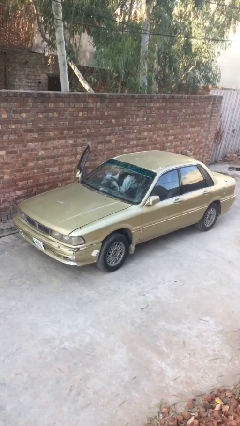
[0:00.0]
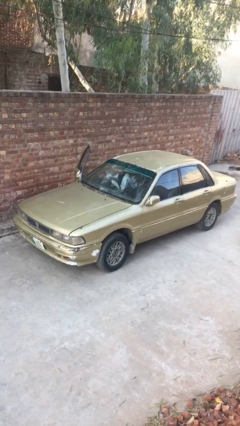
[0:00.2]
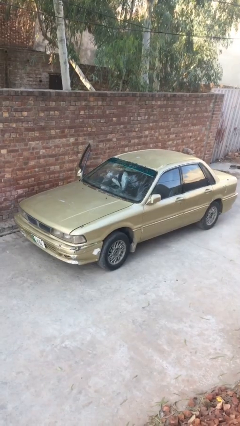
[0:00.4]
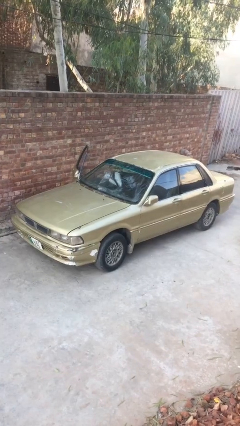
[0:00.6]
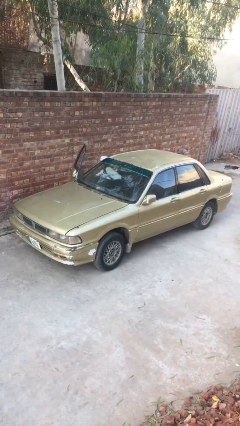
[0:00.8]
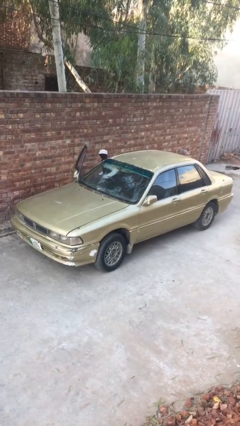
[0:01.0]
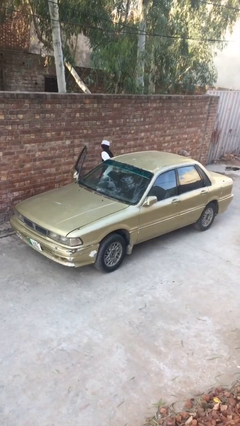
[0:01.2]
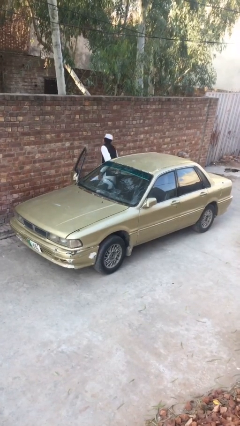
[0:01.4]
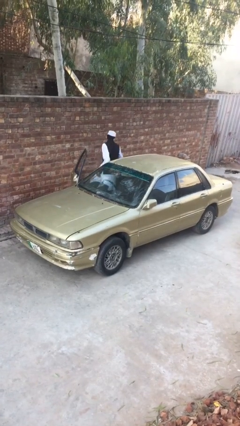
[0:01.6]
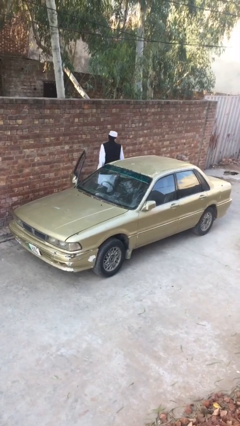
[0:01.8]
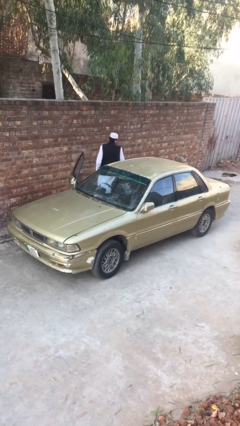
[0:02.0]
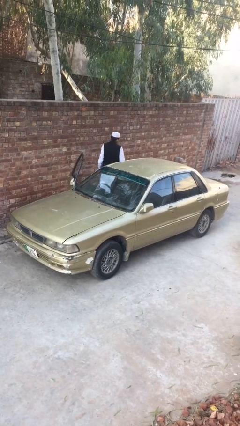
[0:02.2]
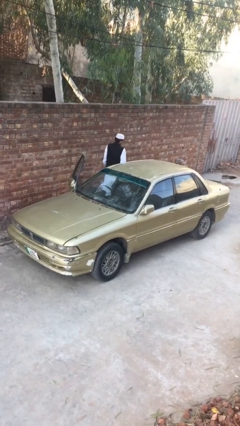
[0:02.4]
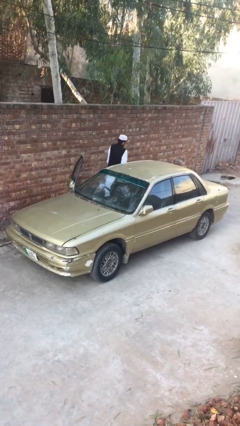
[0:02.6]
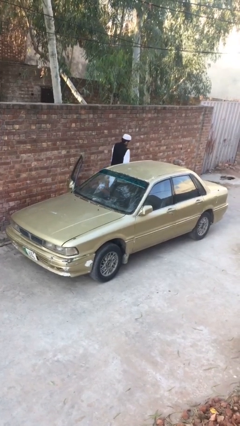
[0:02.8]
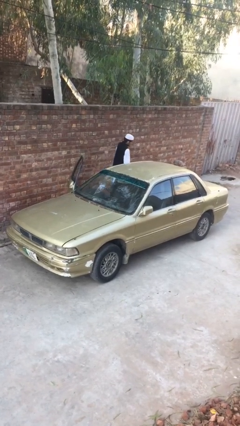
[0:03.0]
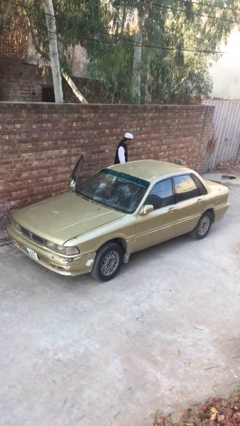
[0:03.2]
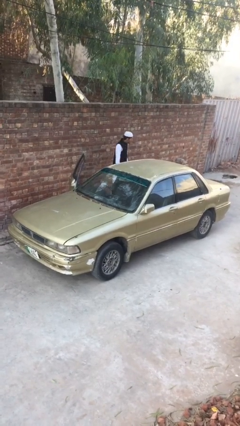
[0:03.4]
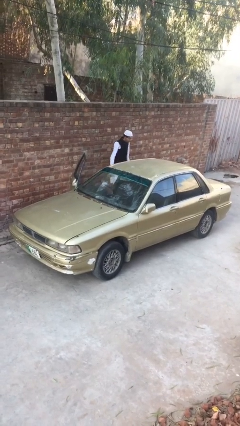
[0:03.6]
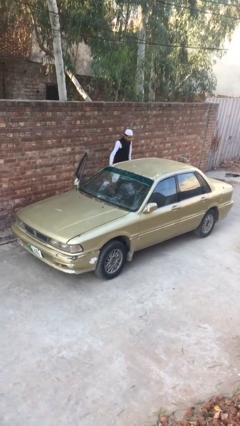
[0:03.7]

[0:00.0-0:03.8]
person exits car

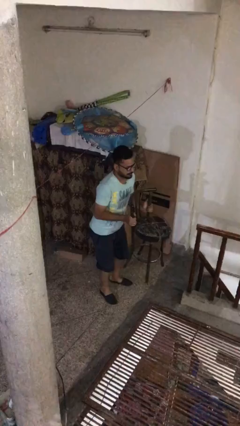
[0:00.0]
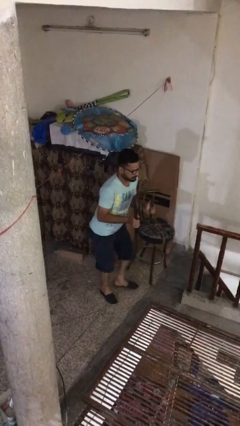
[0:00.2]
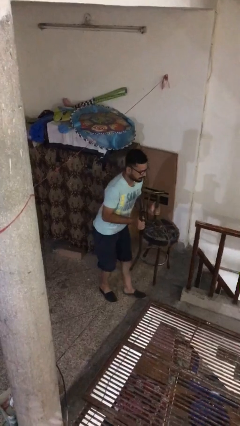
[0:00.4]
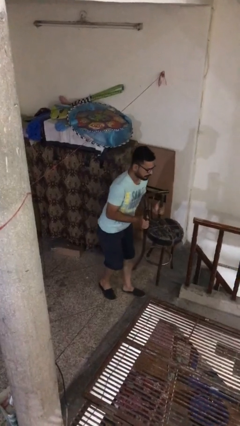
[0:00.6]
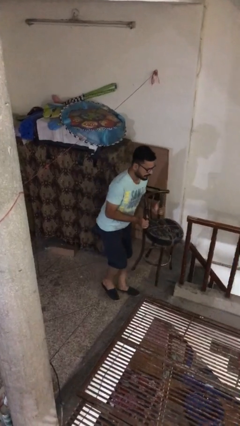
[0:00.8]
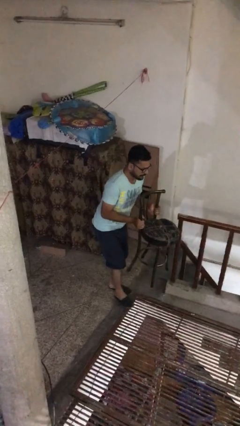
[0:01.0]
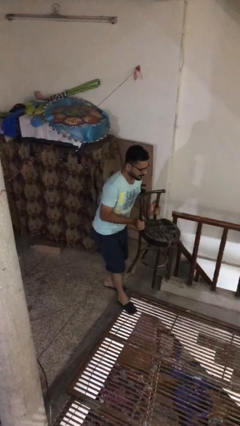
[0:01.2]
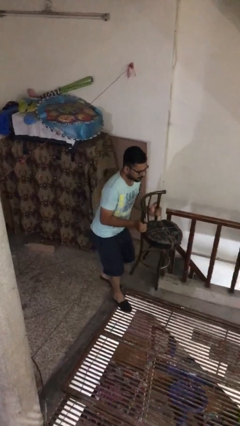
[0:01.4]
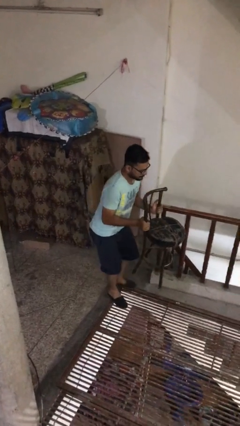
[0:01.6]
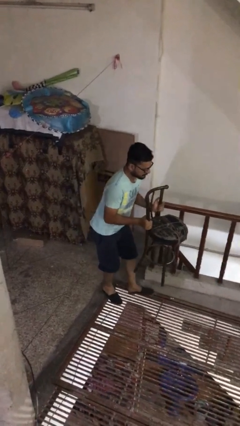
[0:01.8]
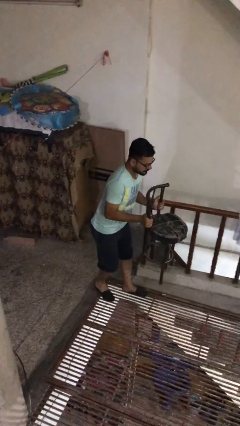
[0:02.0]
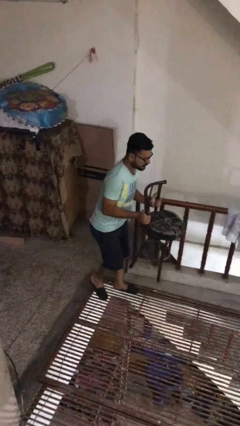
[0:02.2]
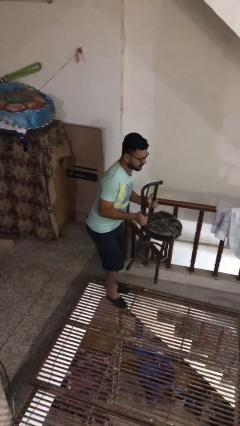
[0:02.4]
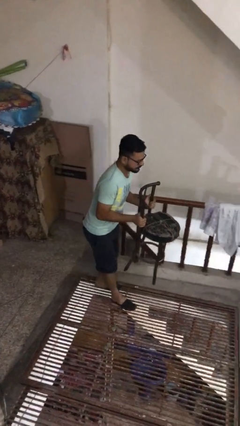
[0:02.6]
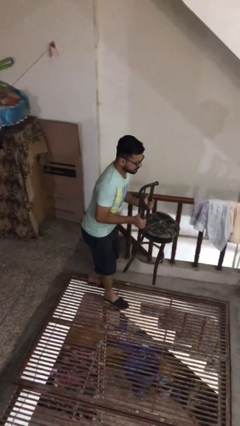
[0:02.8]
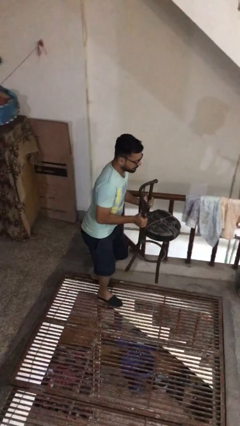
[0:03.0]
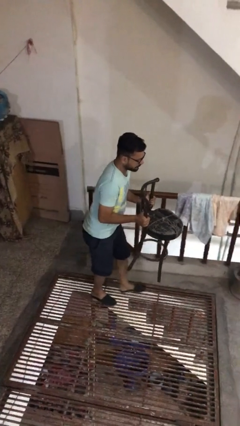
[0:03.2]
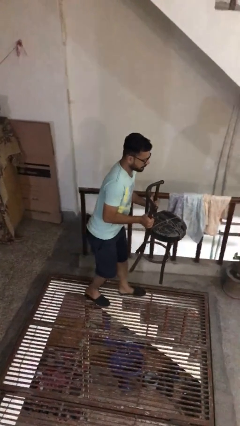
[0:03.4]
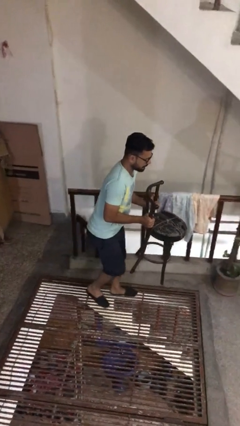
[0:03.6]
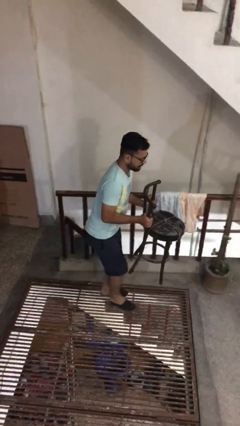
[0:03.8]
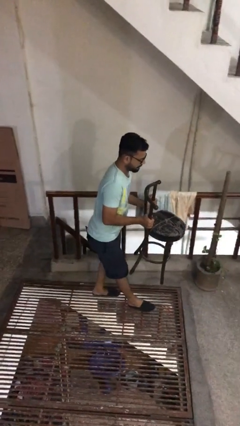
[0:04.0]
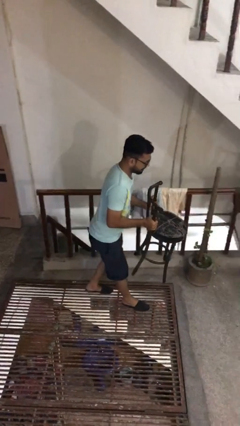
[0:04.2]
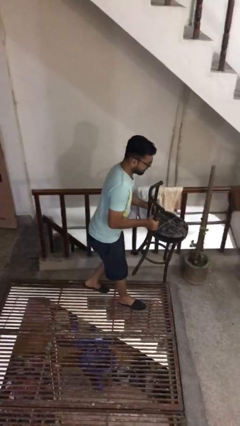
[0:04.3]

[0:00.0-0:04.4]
person carries heavy object

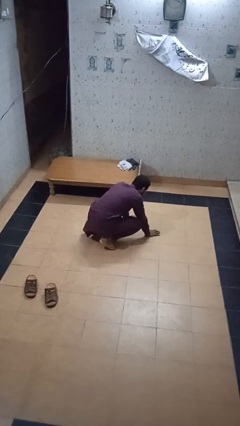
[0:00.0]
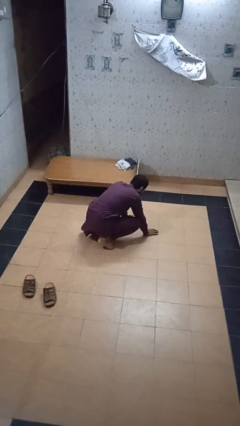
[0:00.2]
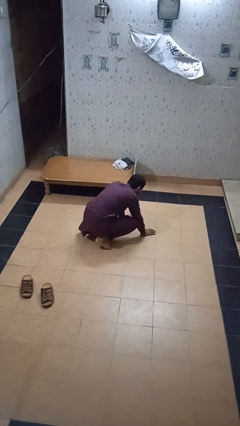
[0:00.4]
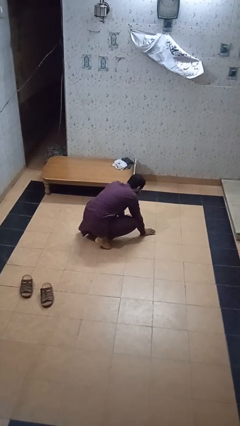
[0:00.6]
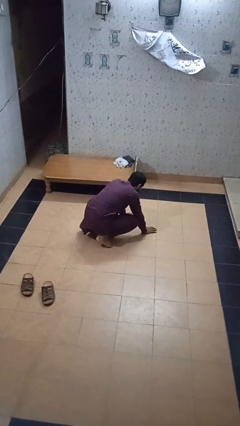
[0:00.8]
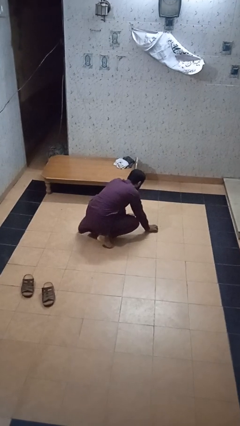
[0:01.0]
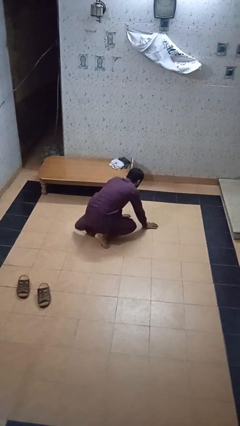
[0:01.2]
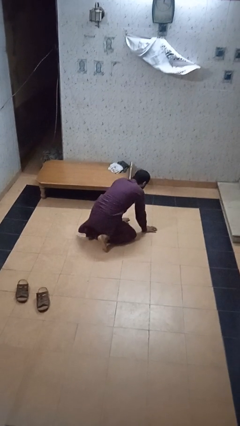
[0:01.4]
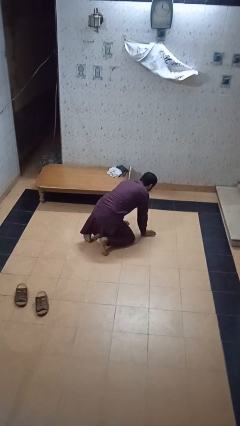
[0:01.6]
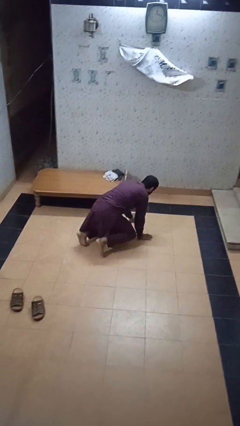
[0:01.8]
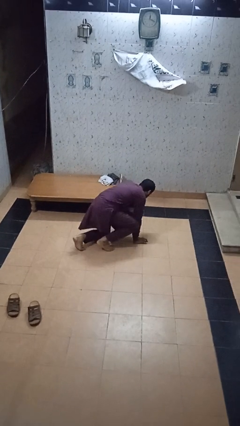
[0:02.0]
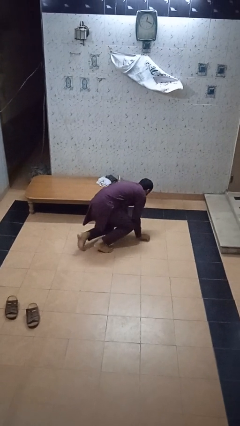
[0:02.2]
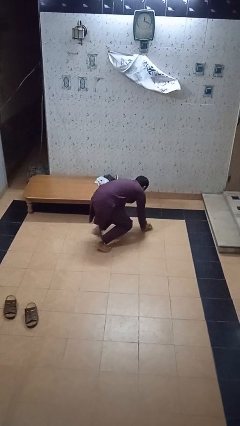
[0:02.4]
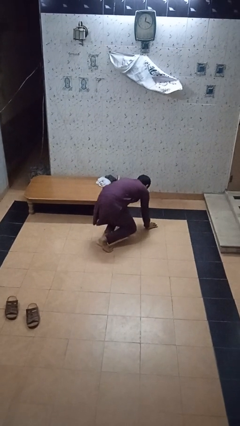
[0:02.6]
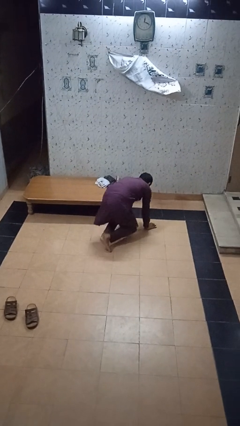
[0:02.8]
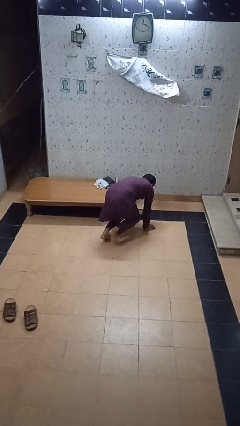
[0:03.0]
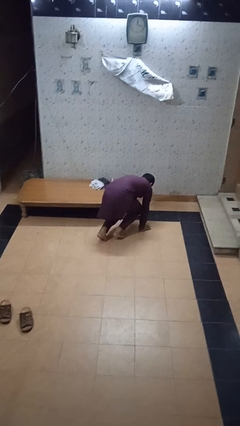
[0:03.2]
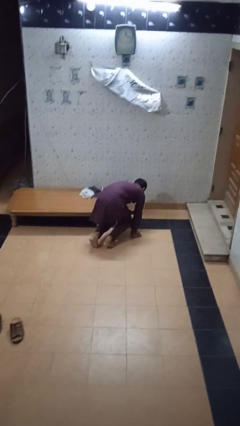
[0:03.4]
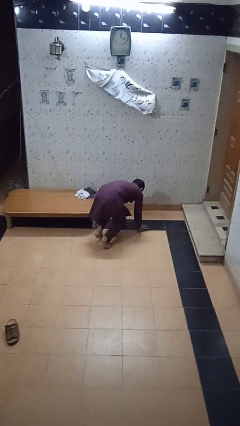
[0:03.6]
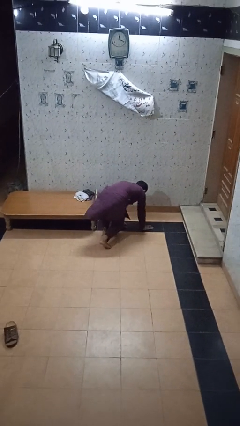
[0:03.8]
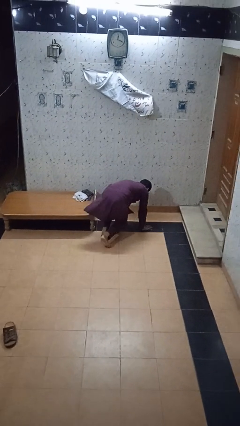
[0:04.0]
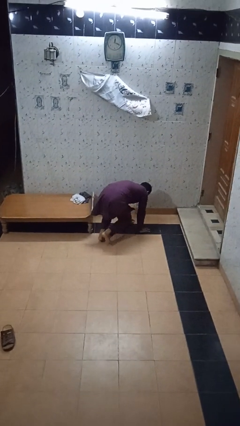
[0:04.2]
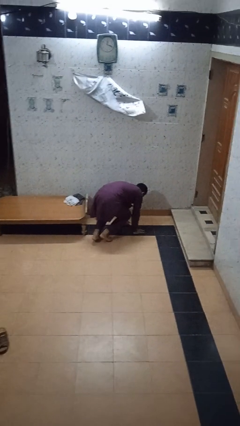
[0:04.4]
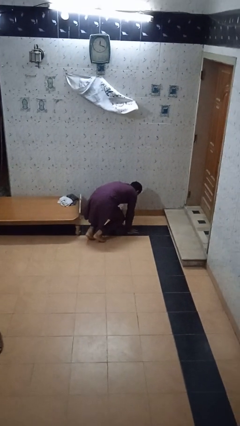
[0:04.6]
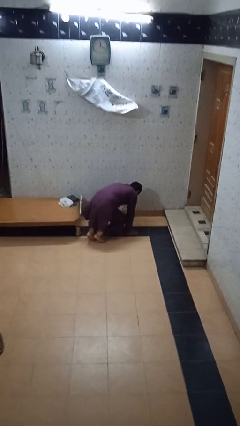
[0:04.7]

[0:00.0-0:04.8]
person crawls

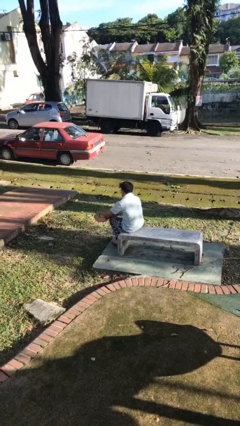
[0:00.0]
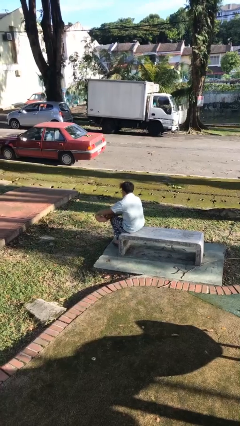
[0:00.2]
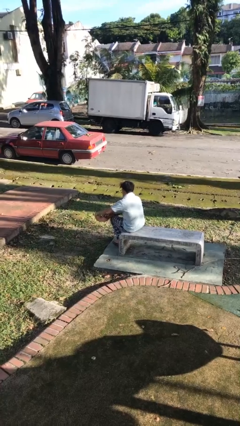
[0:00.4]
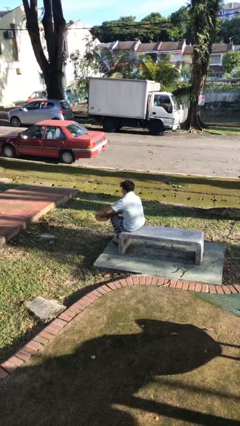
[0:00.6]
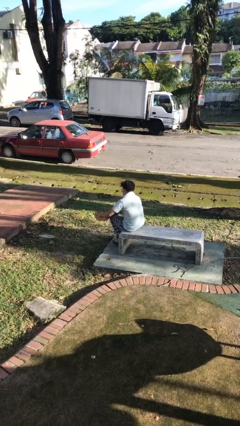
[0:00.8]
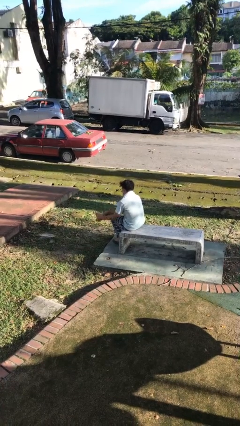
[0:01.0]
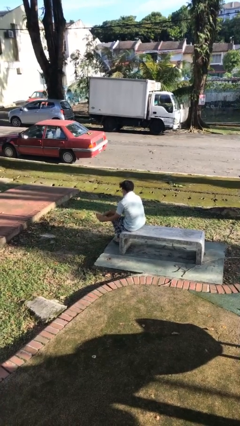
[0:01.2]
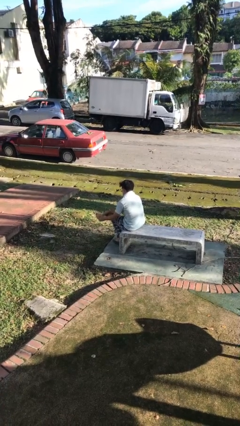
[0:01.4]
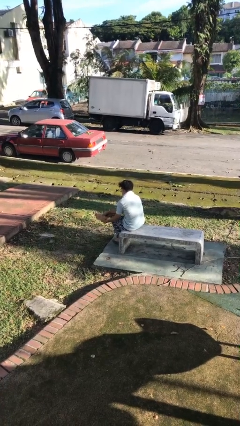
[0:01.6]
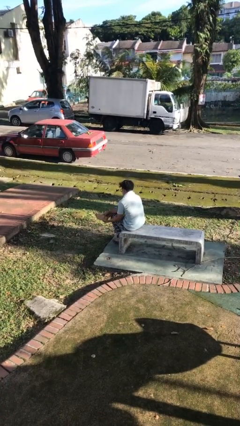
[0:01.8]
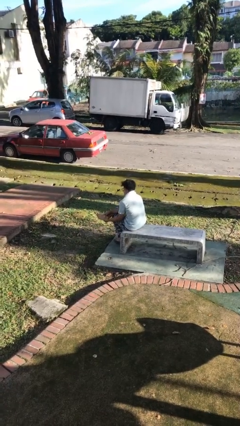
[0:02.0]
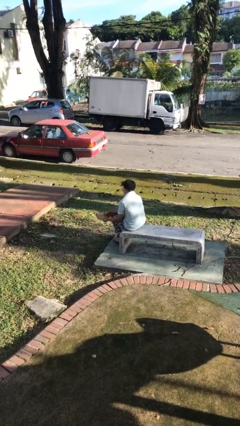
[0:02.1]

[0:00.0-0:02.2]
person rubs foot

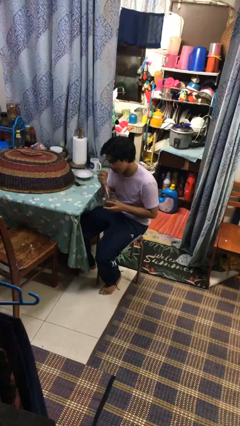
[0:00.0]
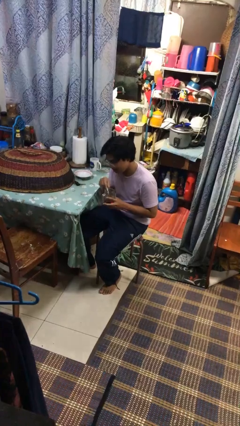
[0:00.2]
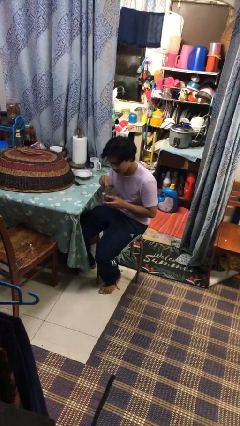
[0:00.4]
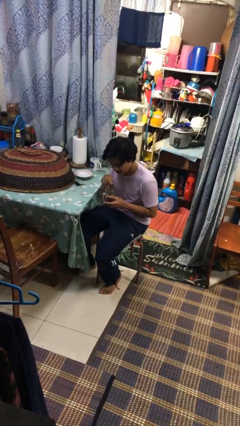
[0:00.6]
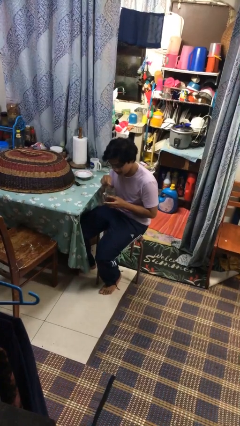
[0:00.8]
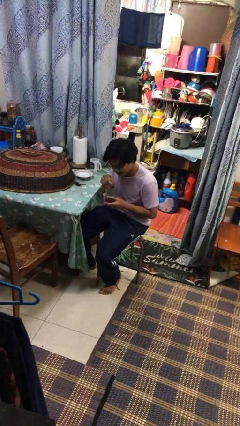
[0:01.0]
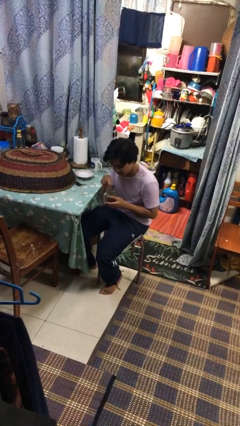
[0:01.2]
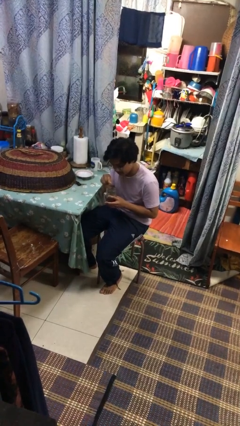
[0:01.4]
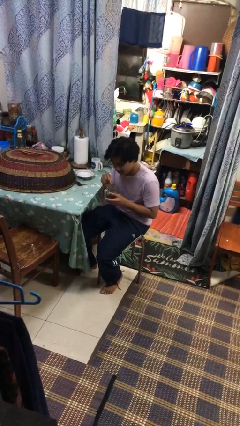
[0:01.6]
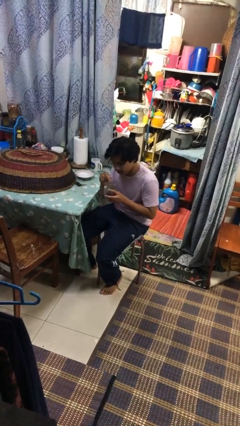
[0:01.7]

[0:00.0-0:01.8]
person stirs mug

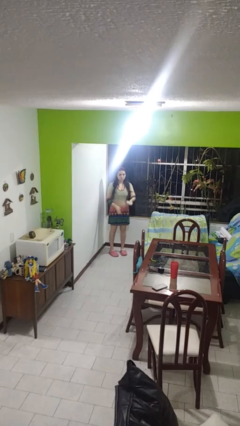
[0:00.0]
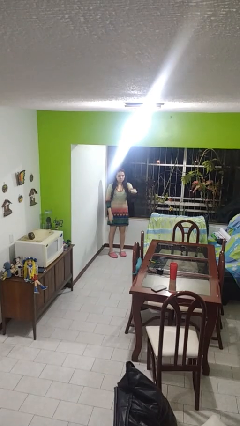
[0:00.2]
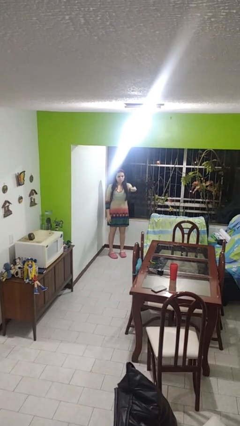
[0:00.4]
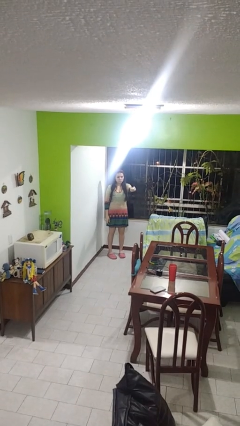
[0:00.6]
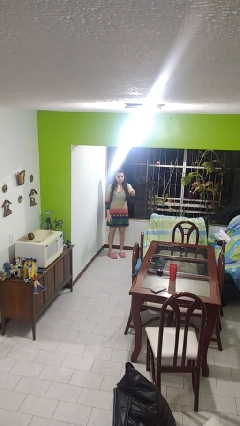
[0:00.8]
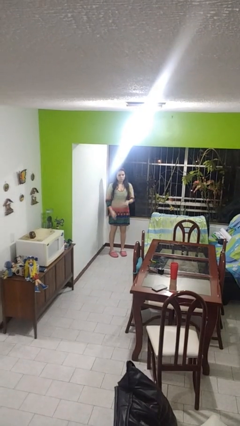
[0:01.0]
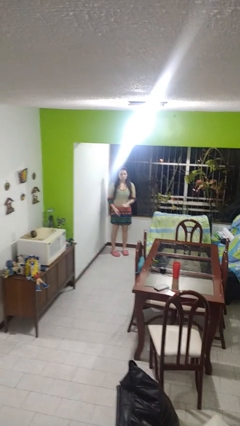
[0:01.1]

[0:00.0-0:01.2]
person uses television remote
